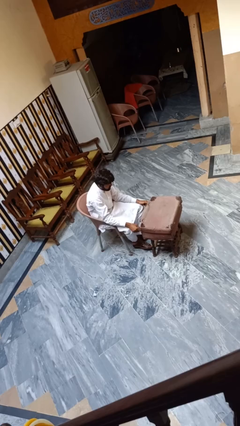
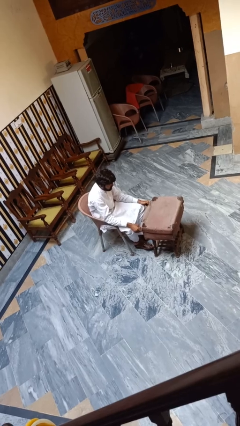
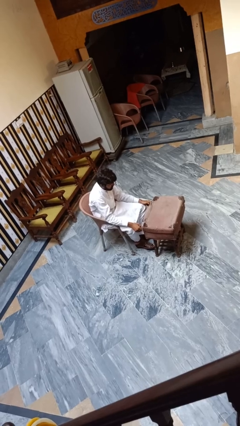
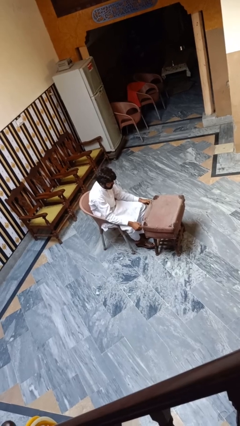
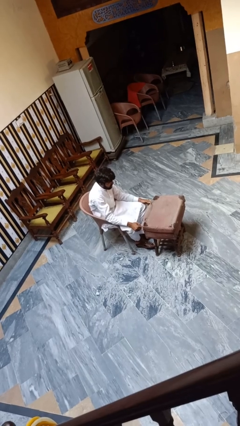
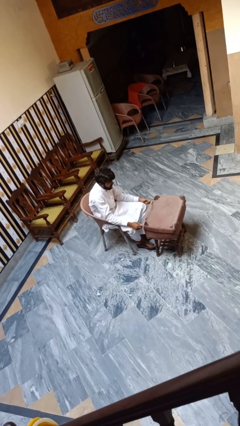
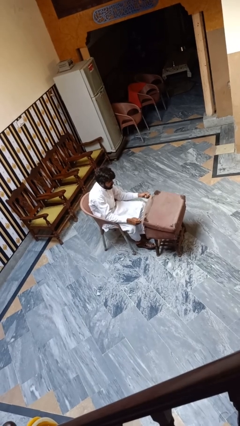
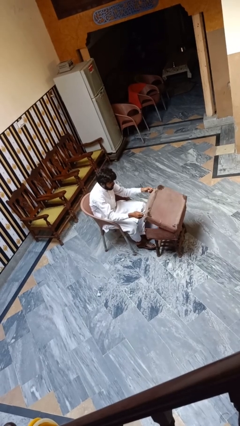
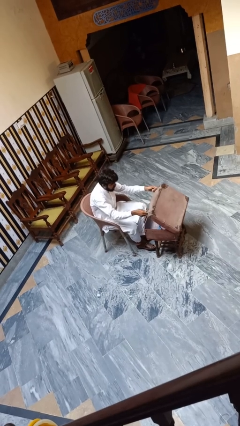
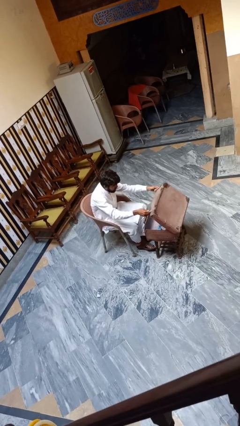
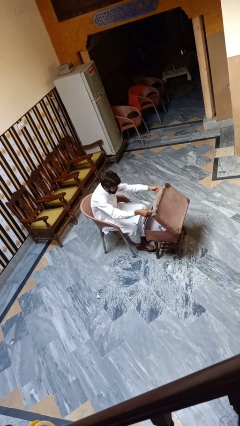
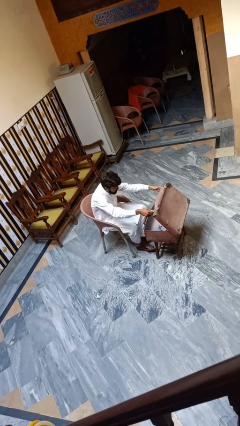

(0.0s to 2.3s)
person opens suitcase

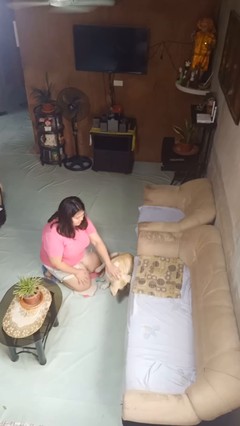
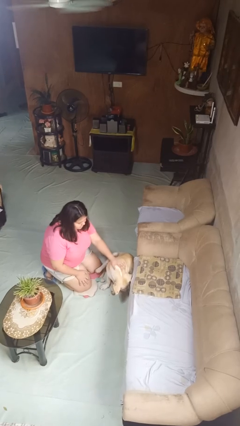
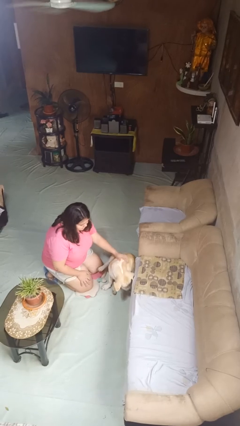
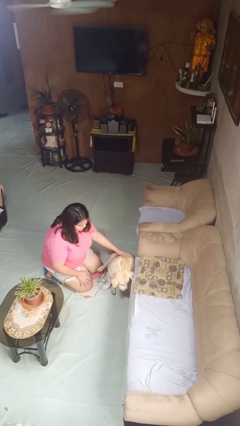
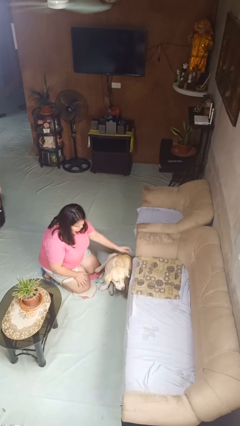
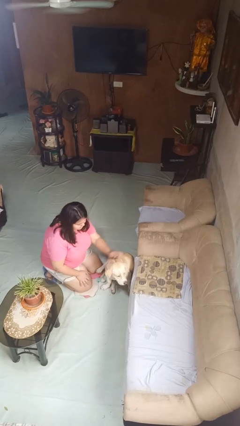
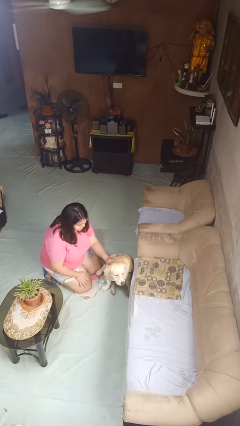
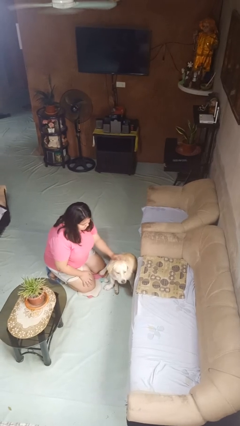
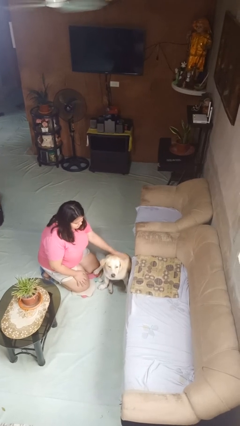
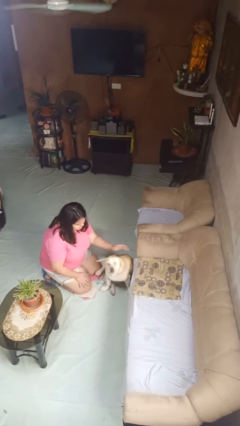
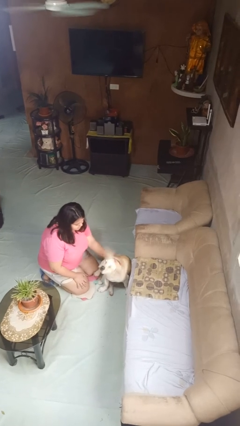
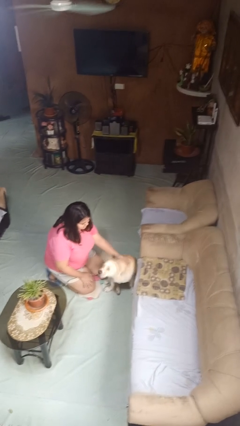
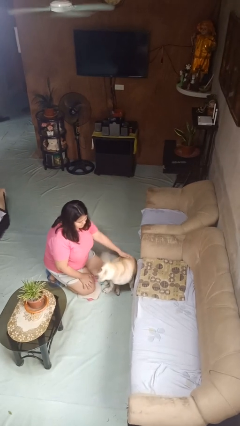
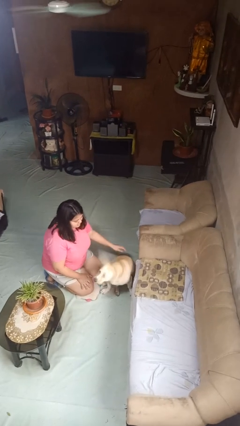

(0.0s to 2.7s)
person pets dog

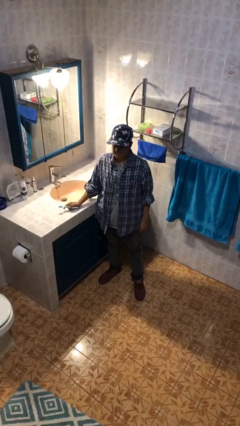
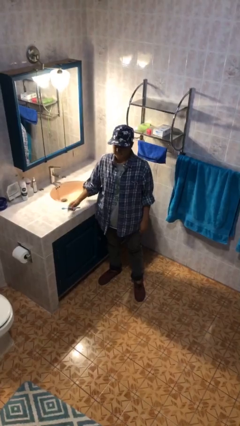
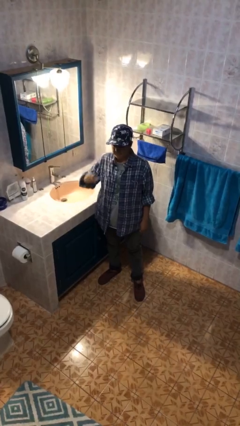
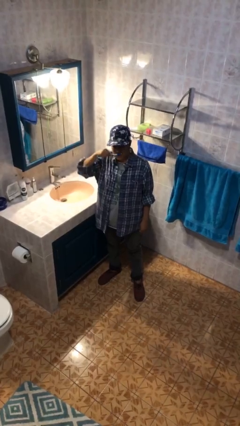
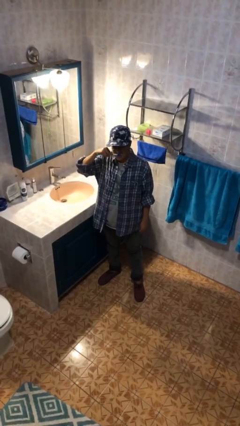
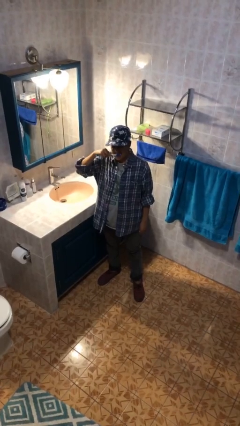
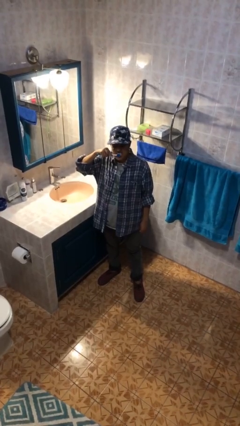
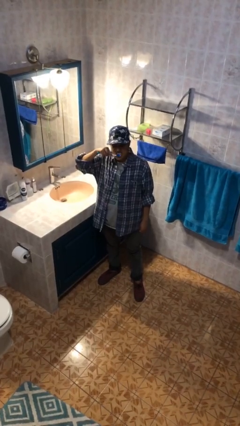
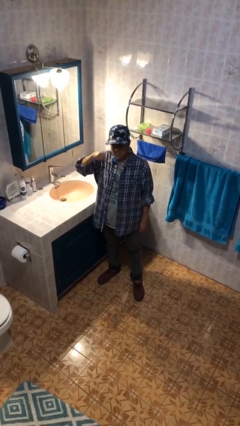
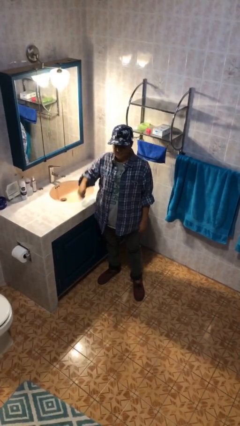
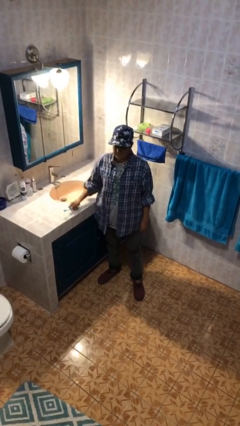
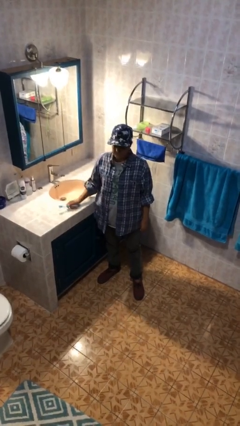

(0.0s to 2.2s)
person brushes teeth

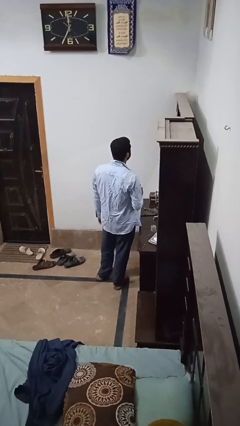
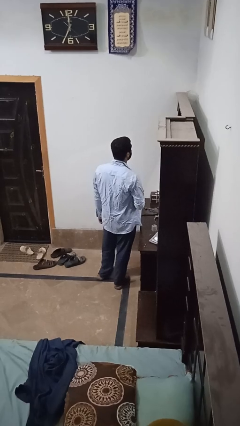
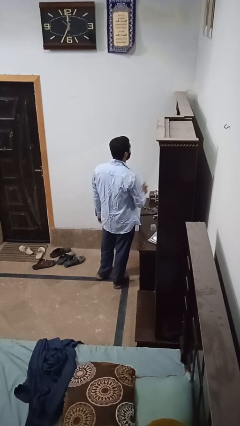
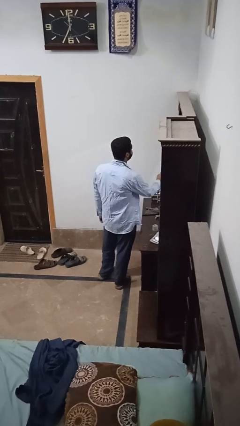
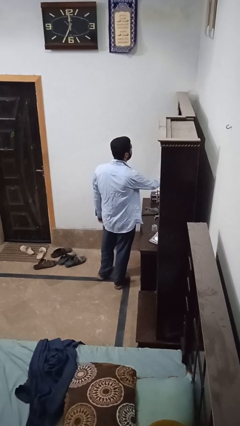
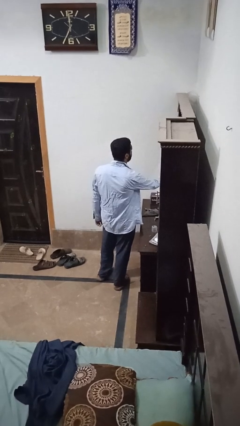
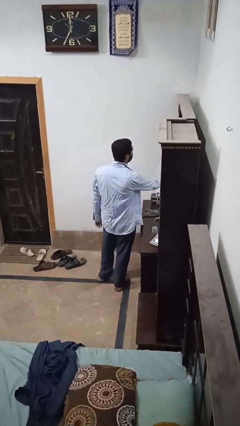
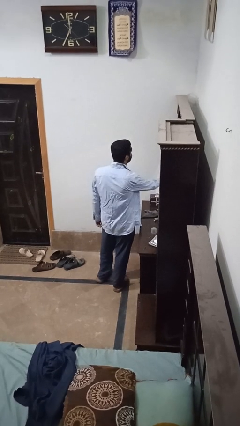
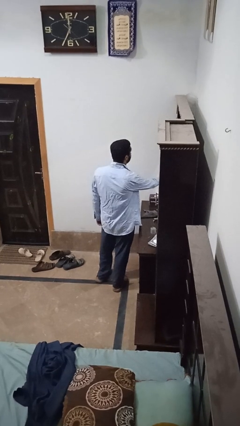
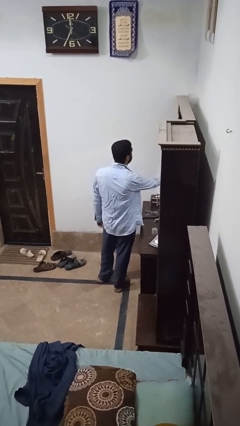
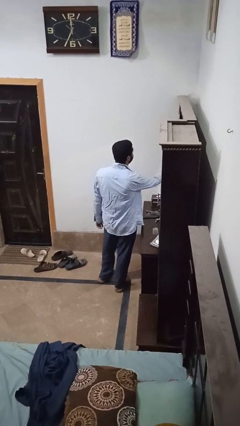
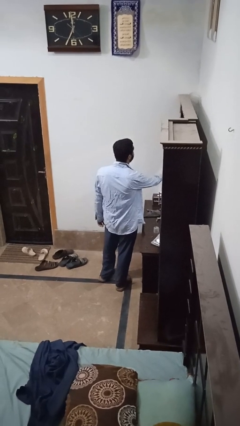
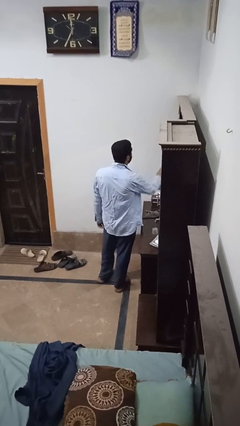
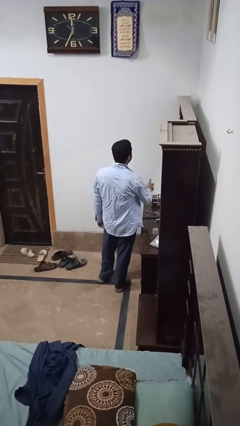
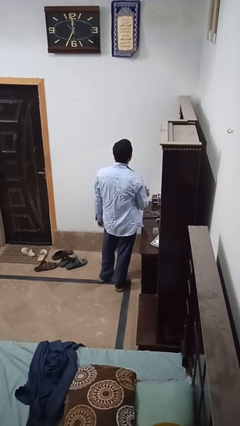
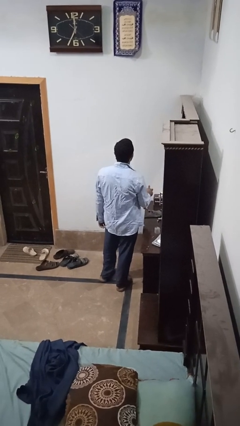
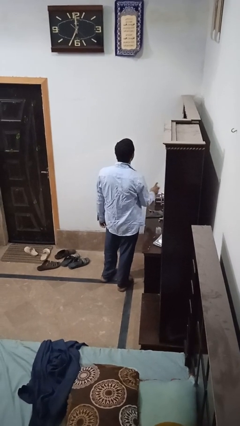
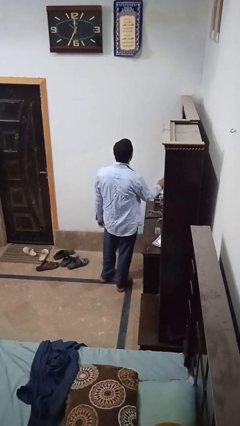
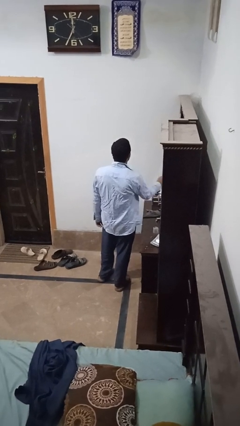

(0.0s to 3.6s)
person sprays from bottle

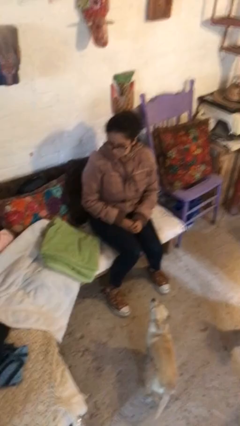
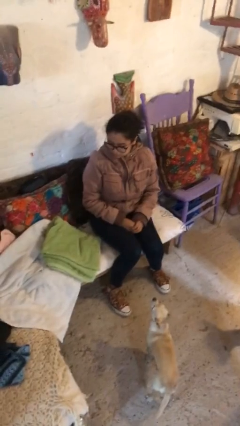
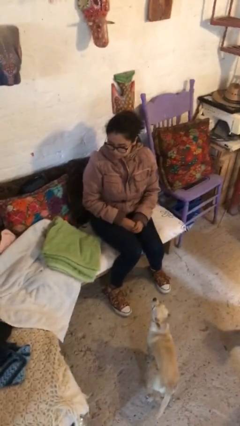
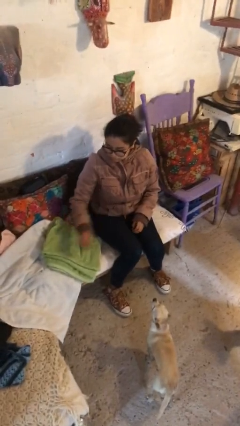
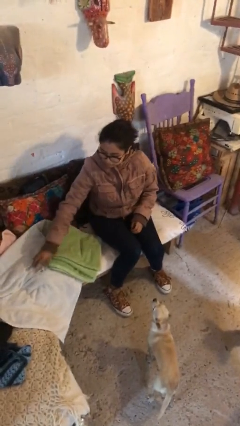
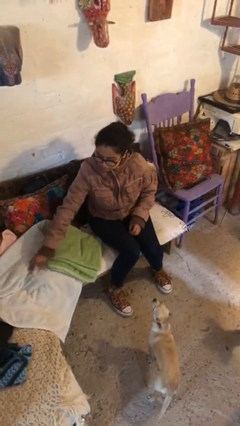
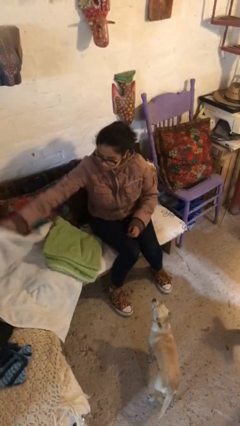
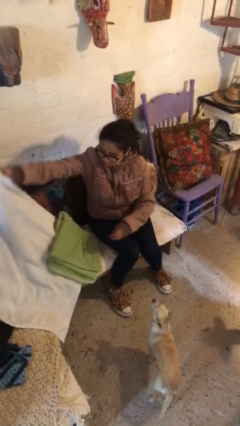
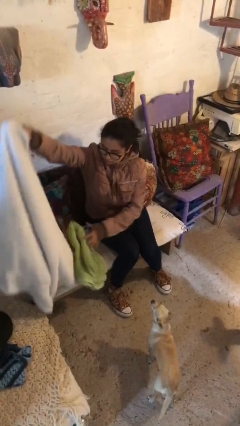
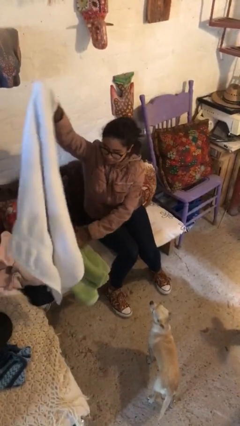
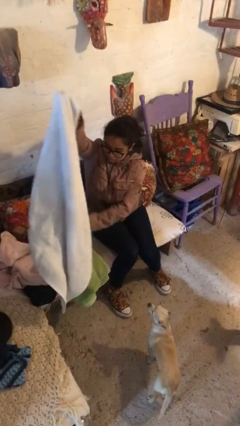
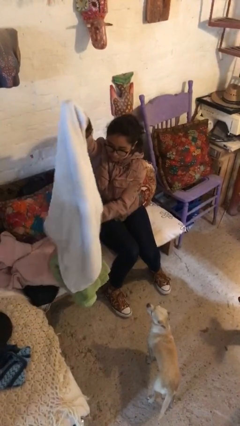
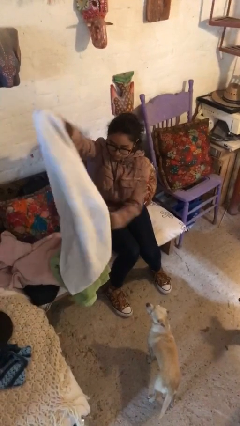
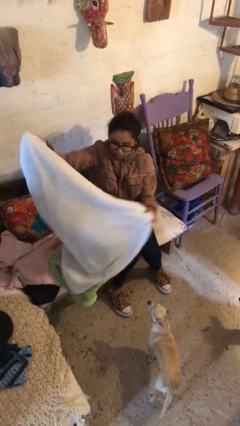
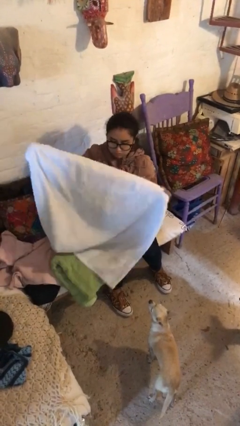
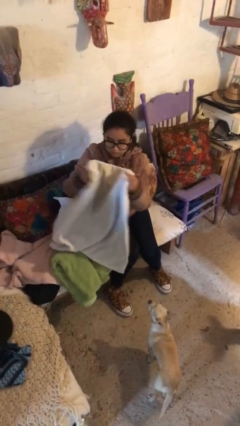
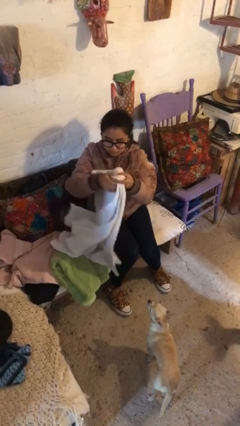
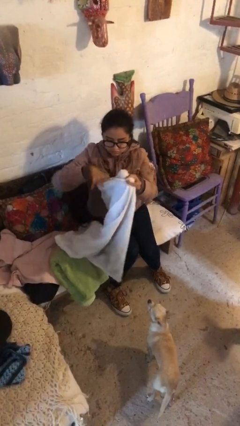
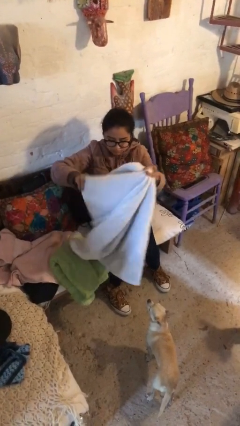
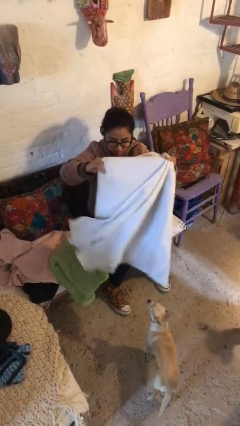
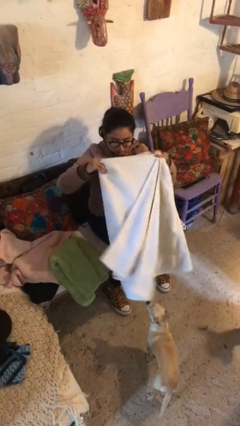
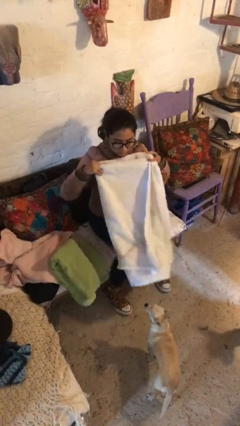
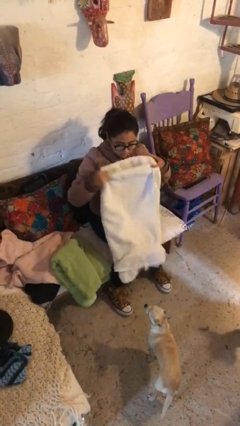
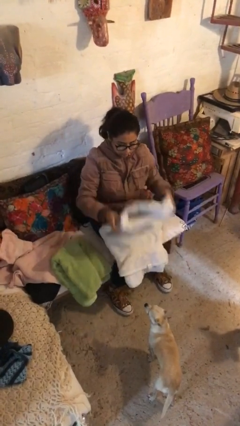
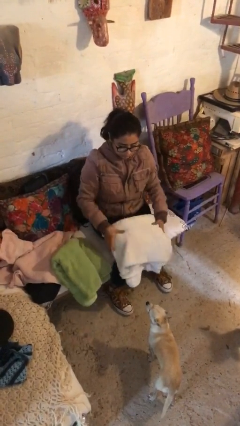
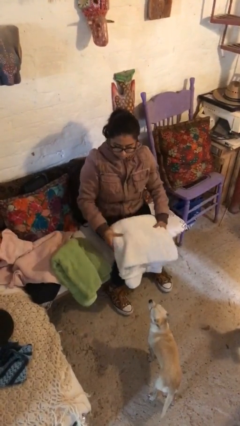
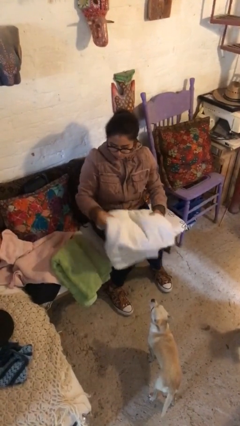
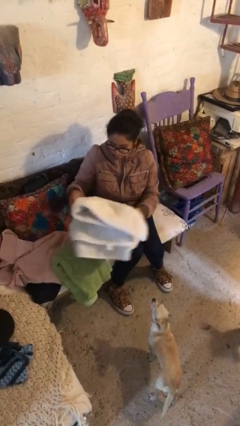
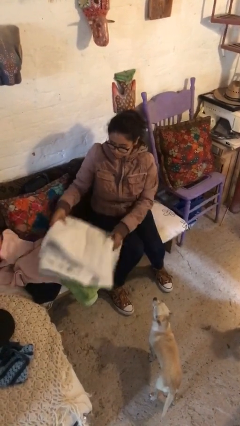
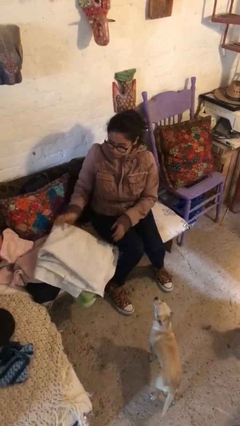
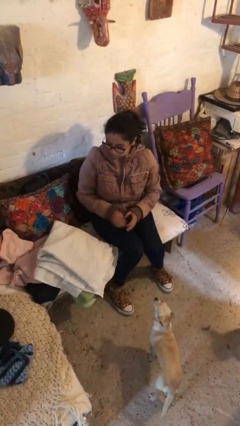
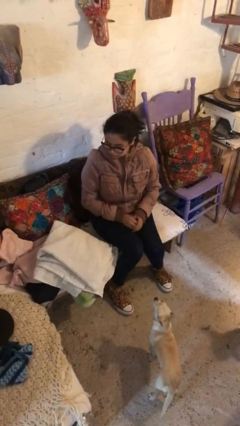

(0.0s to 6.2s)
person folds towel

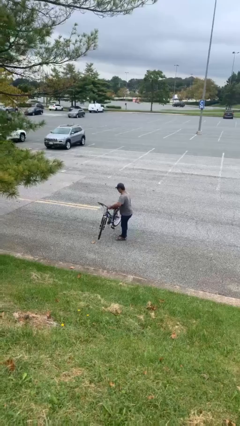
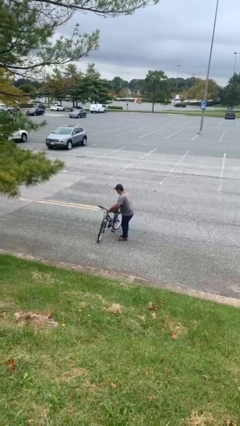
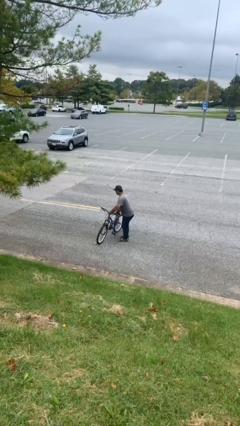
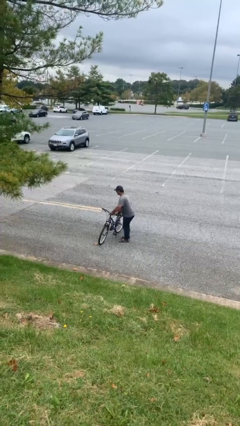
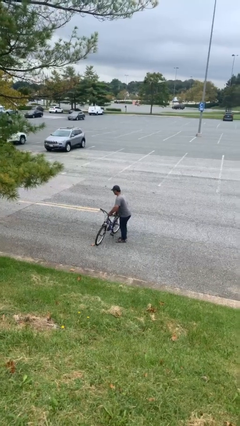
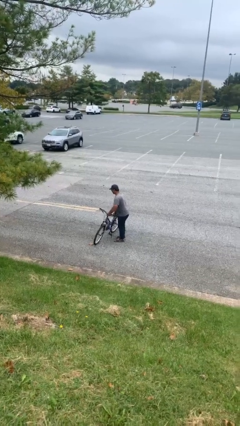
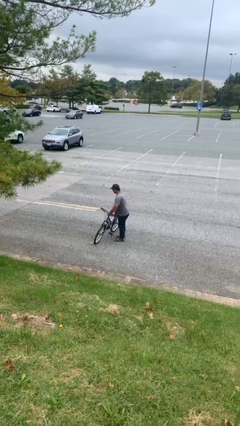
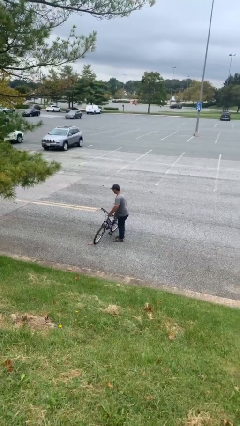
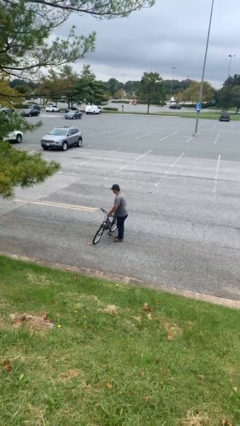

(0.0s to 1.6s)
person puts down object on floor
